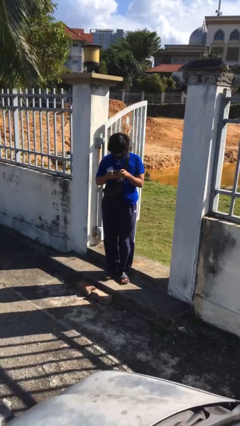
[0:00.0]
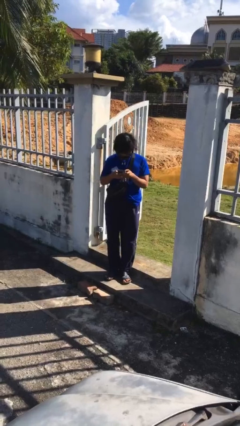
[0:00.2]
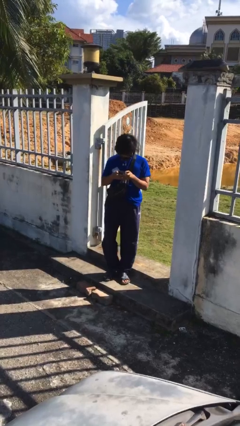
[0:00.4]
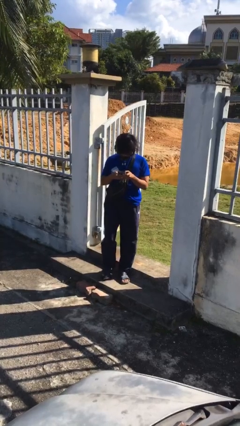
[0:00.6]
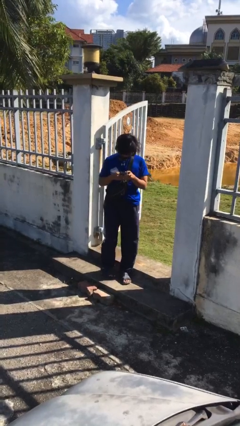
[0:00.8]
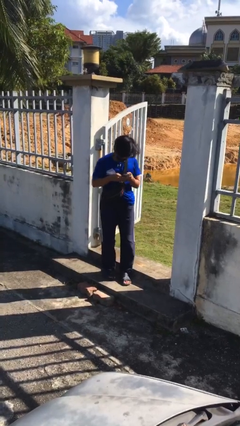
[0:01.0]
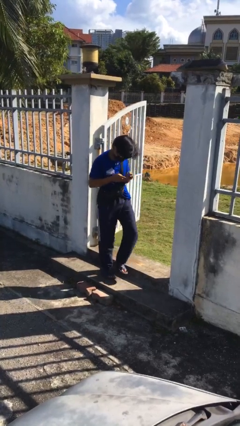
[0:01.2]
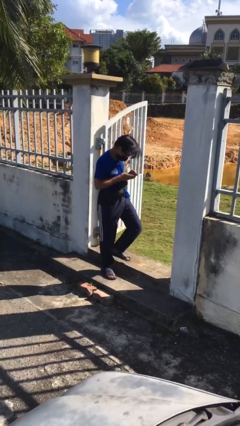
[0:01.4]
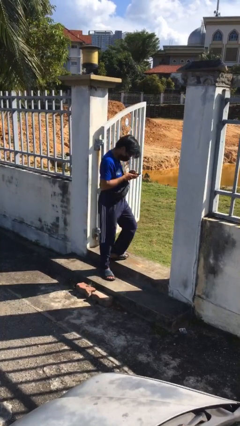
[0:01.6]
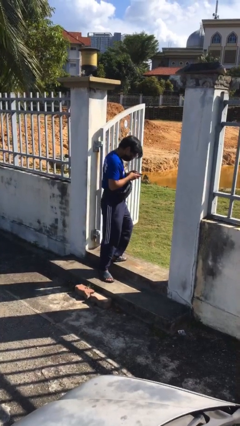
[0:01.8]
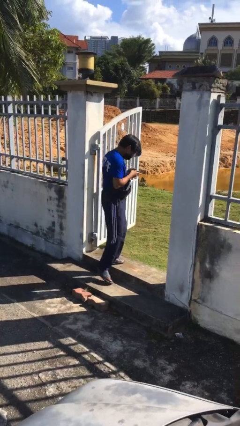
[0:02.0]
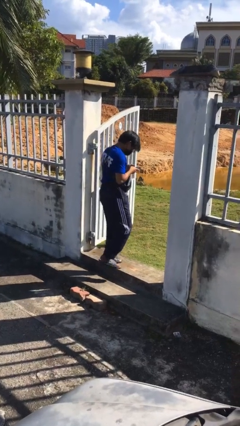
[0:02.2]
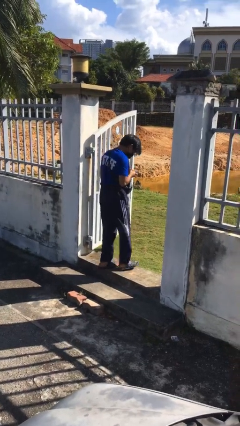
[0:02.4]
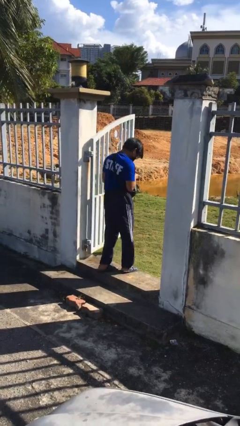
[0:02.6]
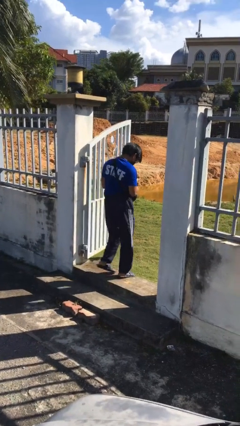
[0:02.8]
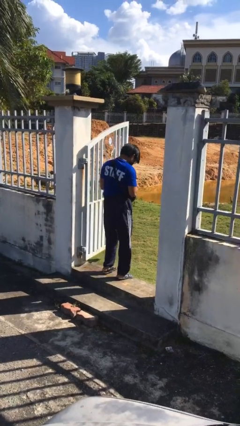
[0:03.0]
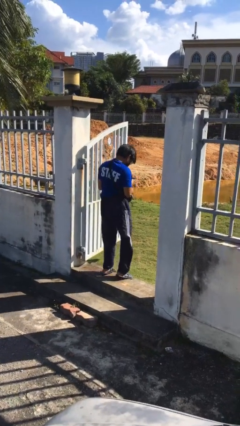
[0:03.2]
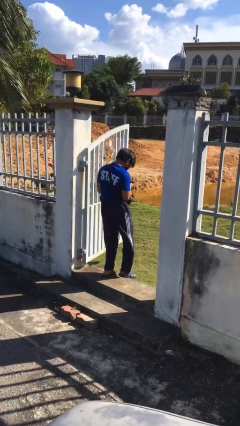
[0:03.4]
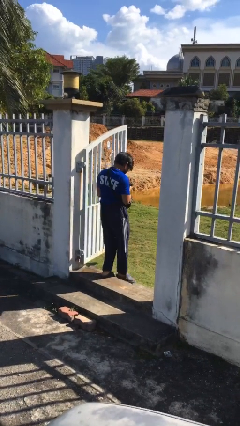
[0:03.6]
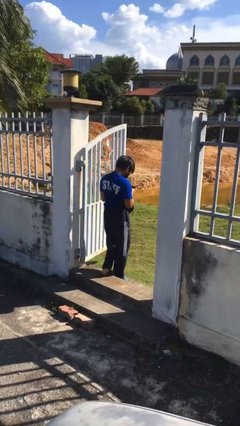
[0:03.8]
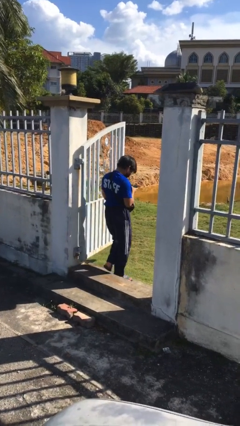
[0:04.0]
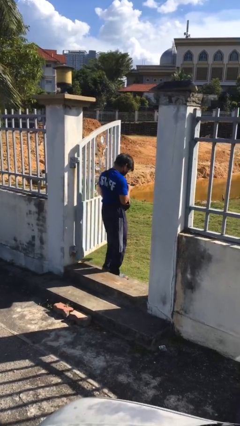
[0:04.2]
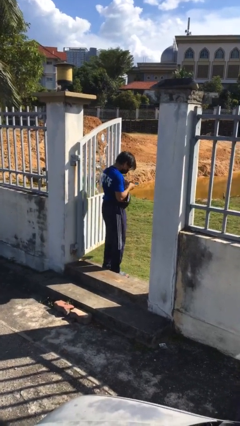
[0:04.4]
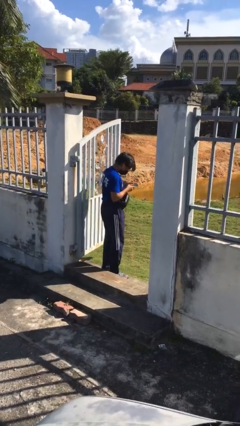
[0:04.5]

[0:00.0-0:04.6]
person exits scene through structure

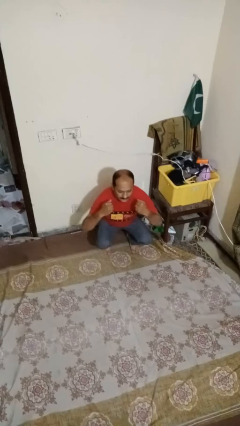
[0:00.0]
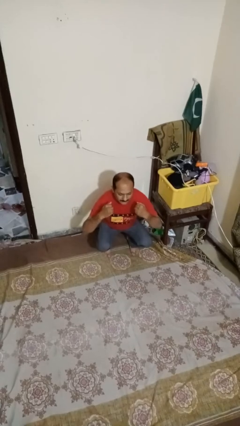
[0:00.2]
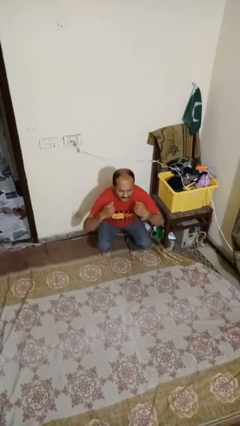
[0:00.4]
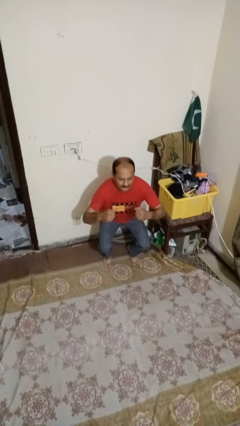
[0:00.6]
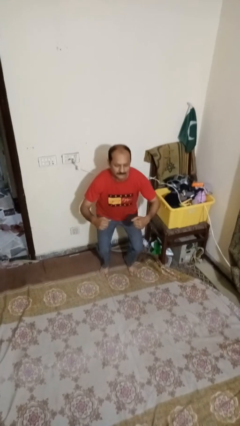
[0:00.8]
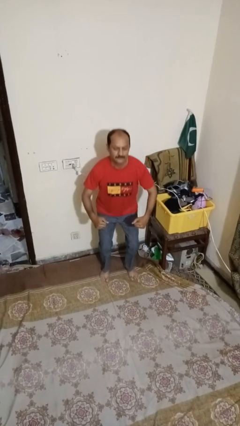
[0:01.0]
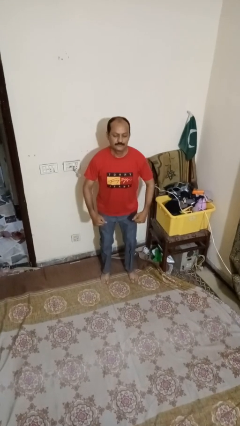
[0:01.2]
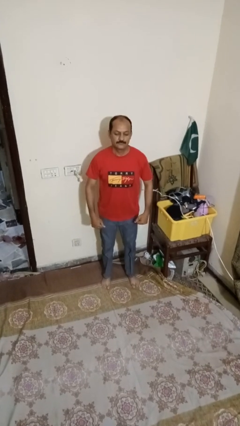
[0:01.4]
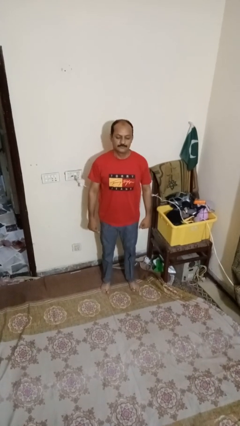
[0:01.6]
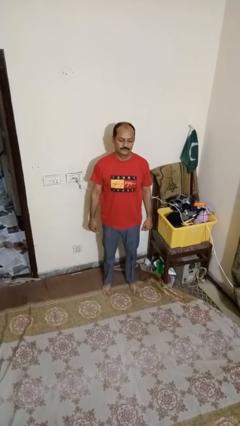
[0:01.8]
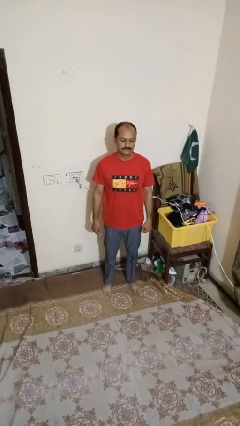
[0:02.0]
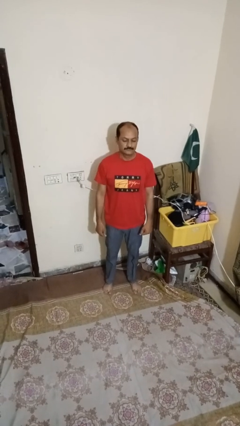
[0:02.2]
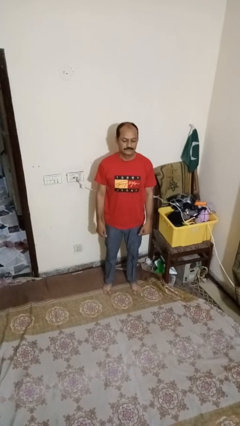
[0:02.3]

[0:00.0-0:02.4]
person stands up

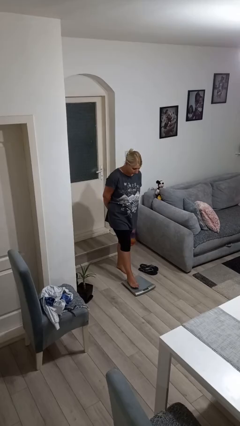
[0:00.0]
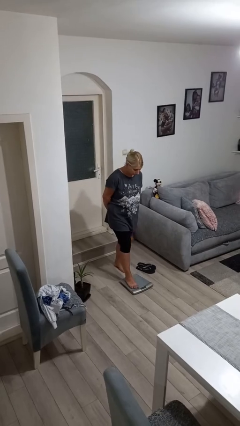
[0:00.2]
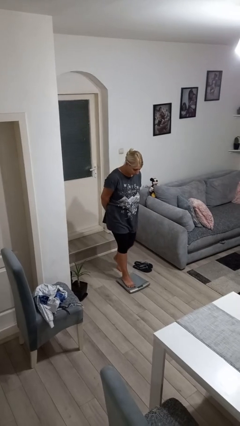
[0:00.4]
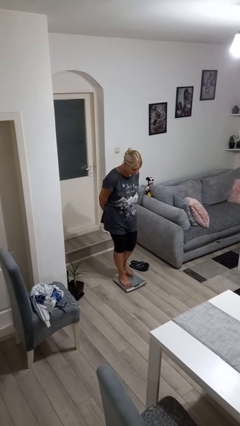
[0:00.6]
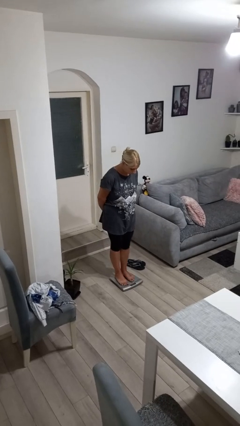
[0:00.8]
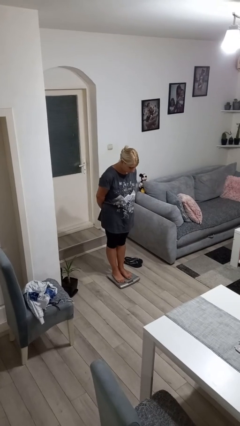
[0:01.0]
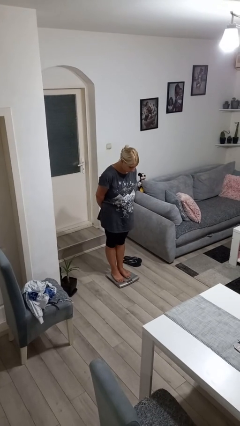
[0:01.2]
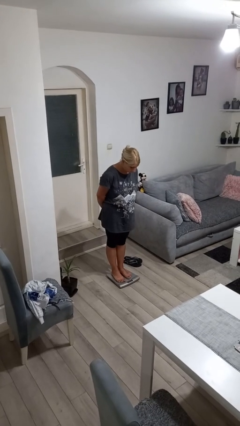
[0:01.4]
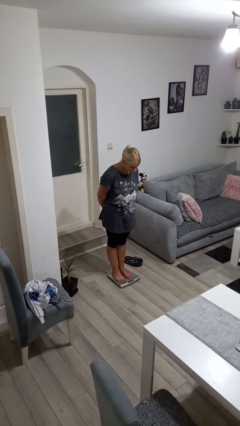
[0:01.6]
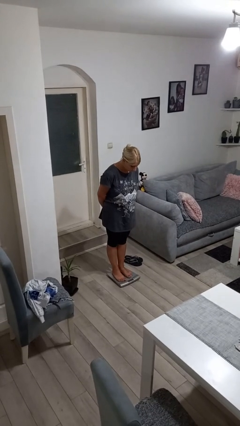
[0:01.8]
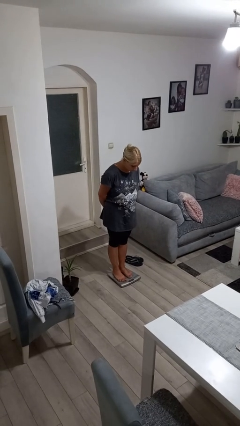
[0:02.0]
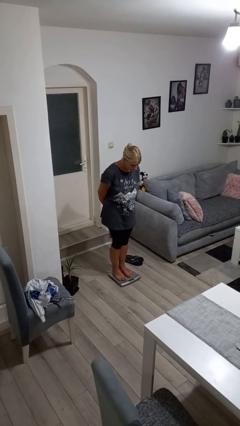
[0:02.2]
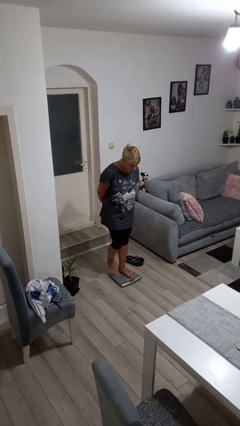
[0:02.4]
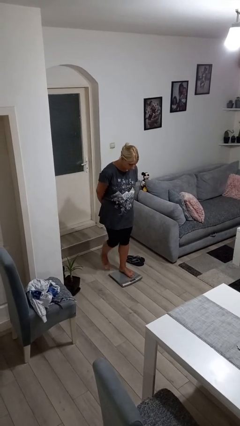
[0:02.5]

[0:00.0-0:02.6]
person uses bodyweight scale

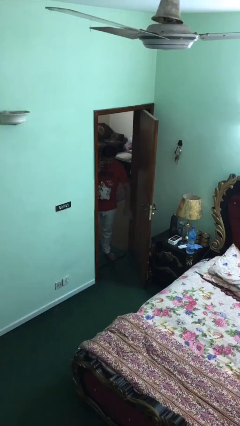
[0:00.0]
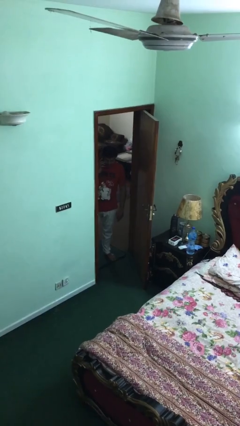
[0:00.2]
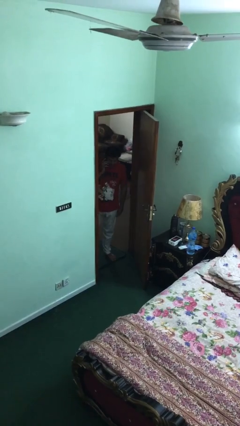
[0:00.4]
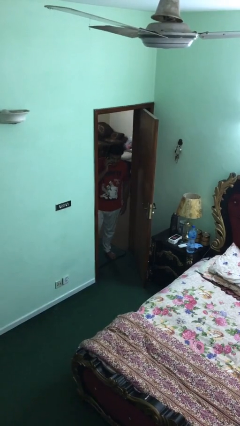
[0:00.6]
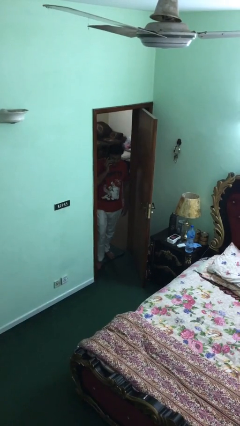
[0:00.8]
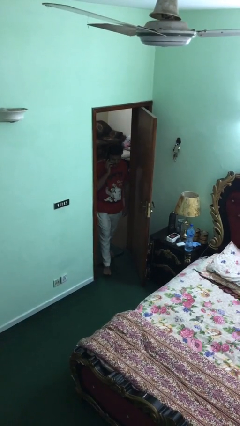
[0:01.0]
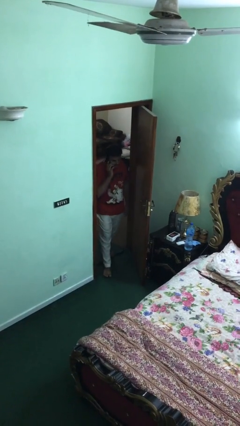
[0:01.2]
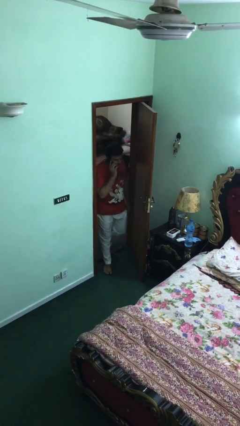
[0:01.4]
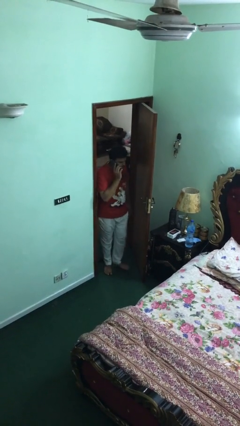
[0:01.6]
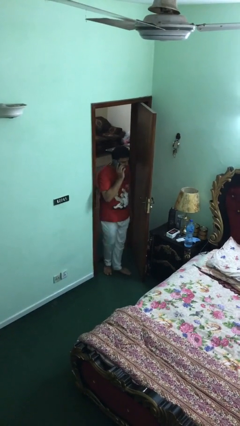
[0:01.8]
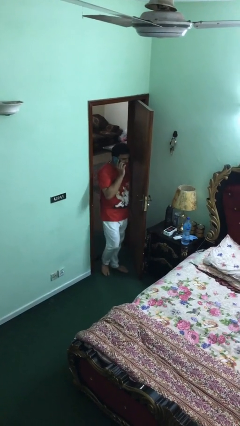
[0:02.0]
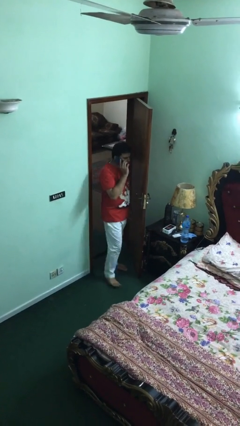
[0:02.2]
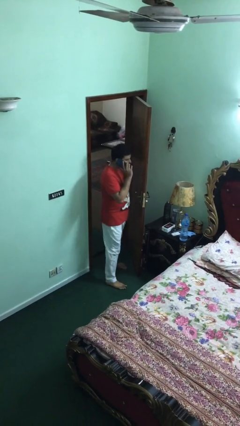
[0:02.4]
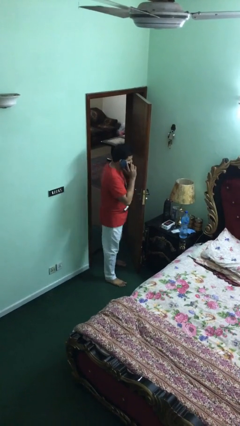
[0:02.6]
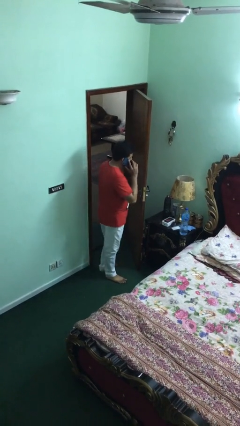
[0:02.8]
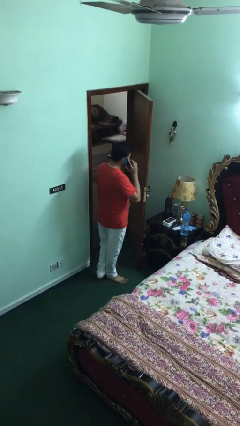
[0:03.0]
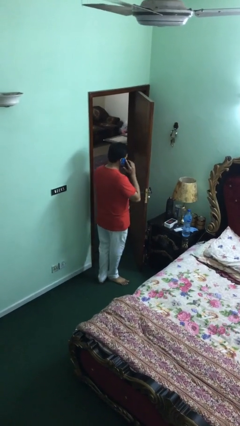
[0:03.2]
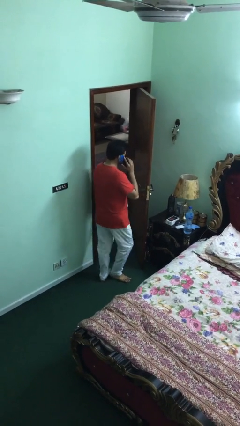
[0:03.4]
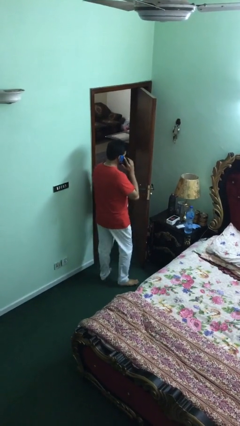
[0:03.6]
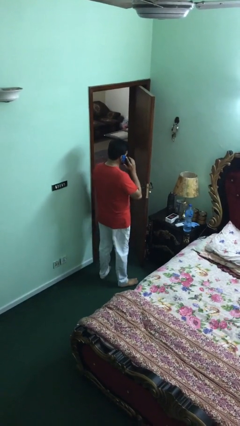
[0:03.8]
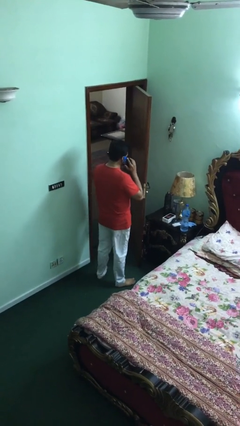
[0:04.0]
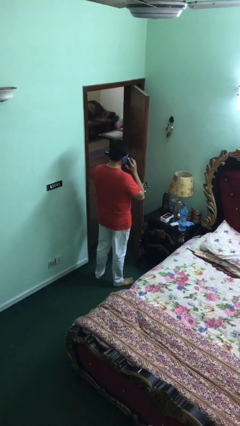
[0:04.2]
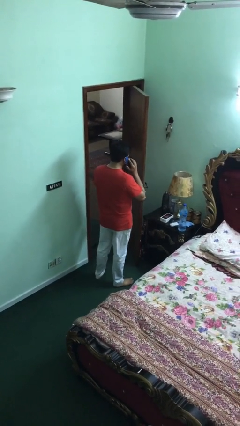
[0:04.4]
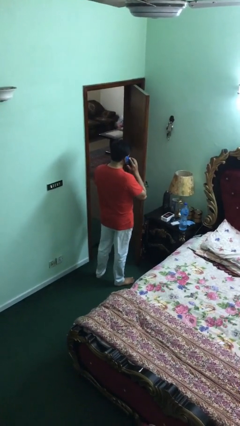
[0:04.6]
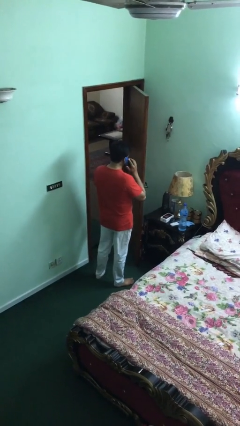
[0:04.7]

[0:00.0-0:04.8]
person enters scene through structure

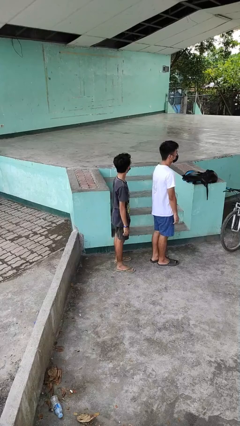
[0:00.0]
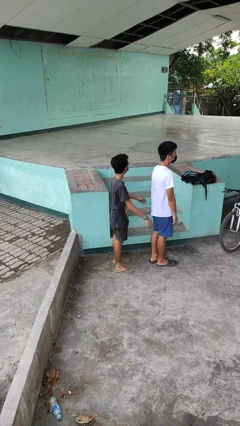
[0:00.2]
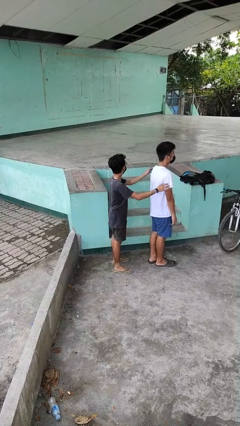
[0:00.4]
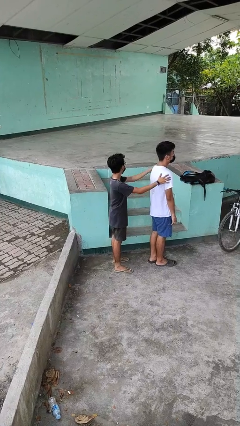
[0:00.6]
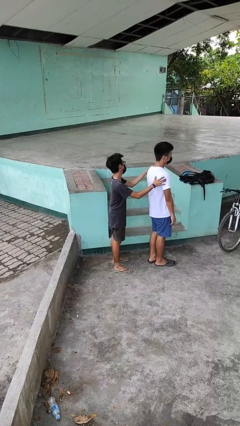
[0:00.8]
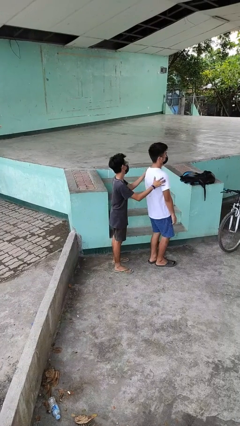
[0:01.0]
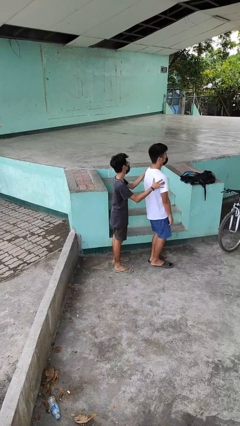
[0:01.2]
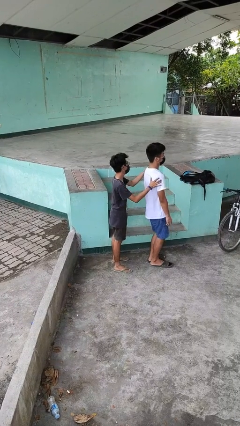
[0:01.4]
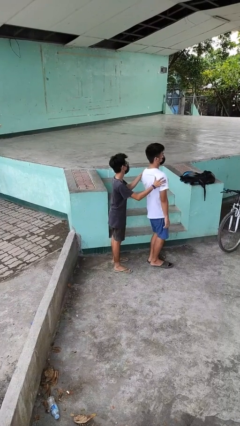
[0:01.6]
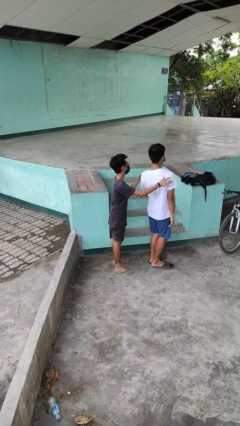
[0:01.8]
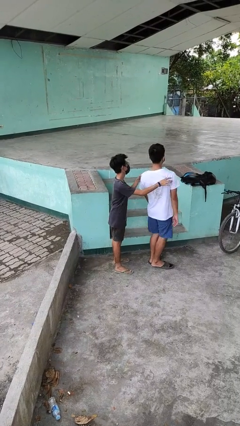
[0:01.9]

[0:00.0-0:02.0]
person grabs person by shoulder

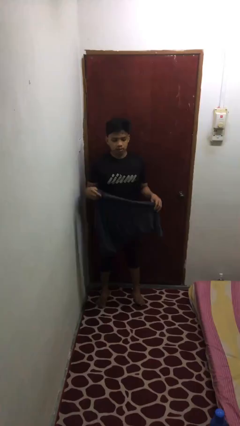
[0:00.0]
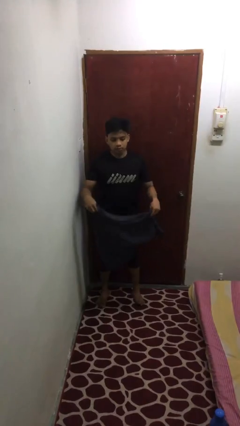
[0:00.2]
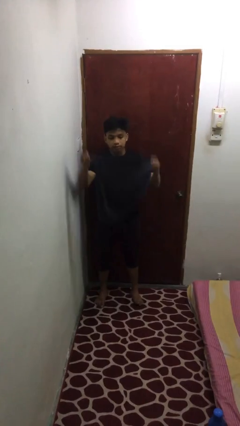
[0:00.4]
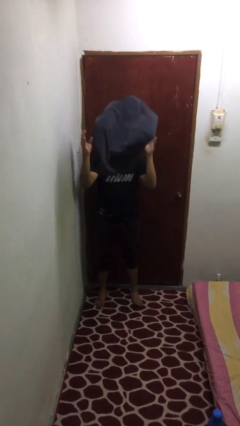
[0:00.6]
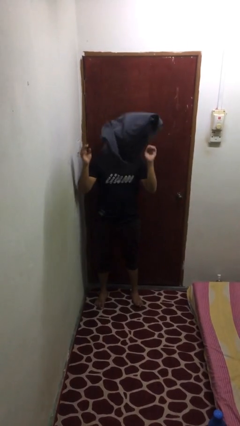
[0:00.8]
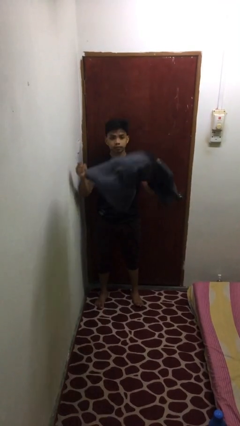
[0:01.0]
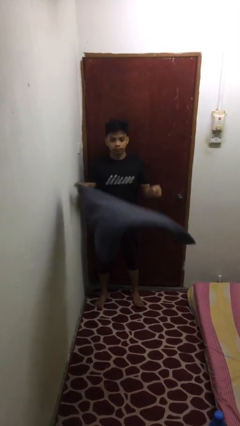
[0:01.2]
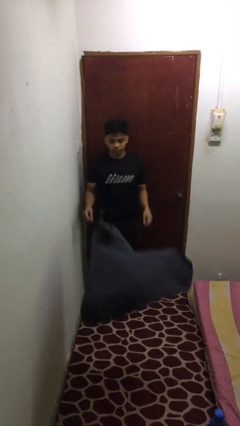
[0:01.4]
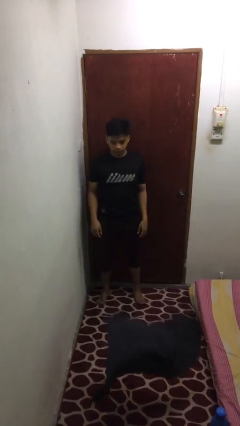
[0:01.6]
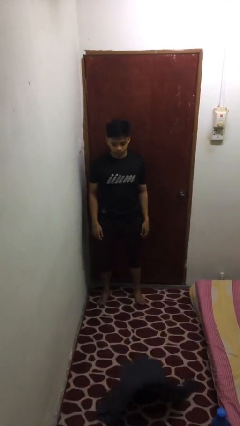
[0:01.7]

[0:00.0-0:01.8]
person throws object into air
